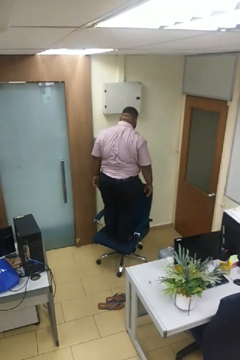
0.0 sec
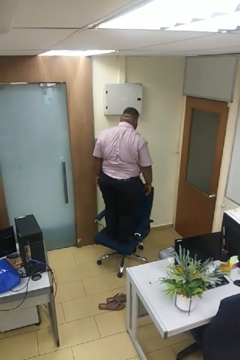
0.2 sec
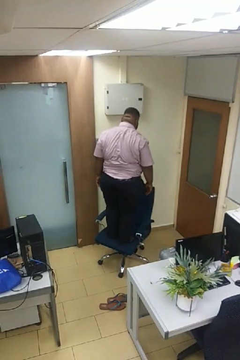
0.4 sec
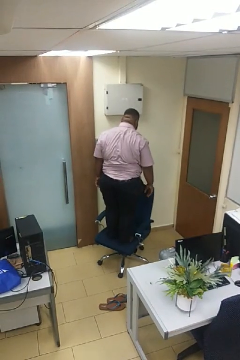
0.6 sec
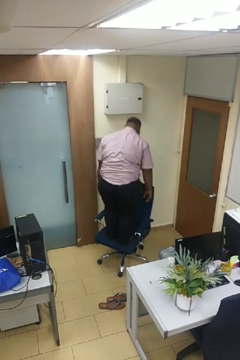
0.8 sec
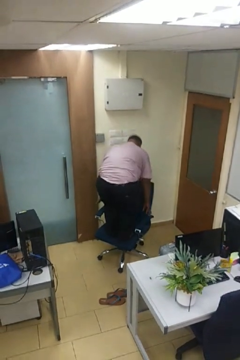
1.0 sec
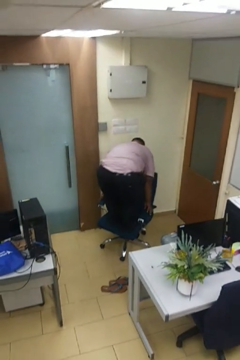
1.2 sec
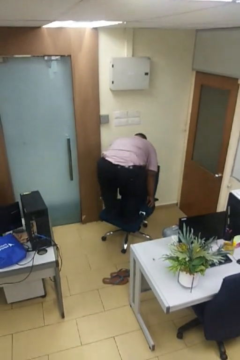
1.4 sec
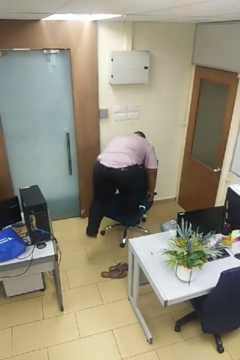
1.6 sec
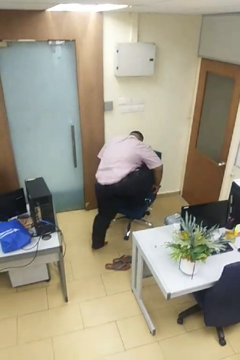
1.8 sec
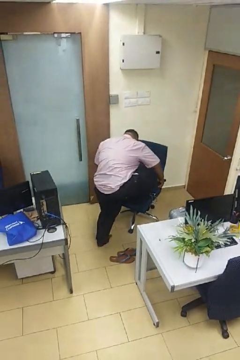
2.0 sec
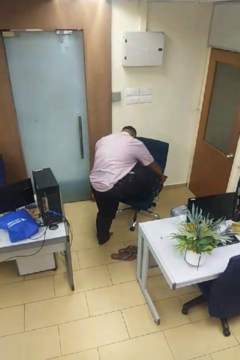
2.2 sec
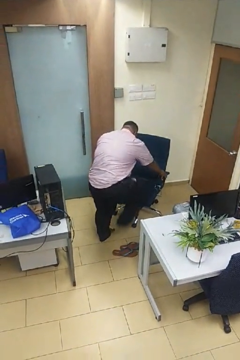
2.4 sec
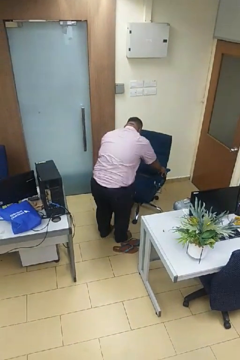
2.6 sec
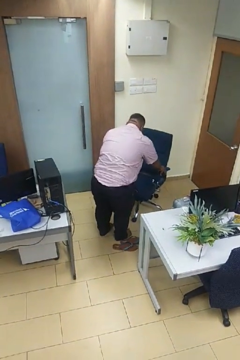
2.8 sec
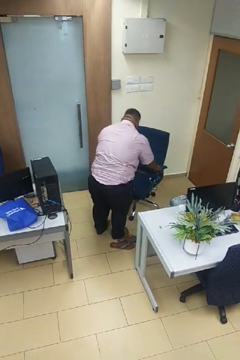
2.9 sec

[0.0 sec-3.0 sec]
person climbs off chair

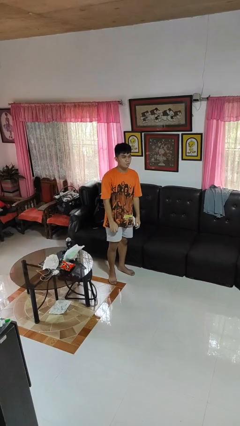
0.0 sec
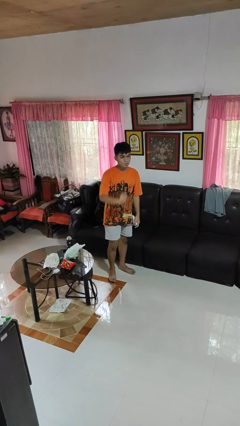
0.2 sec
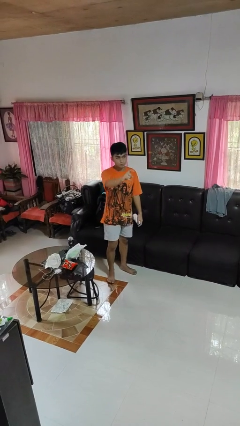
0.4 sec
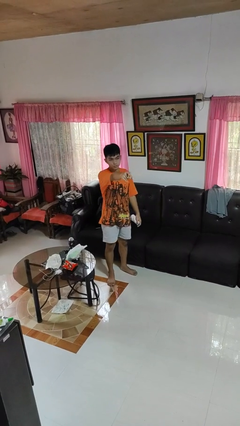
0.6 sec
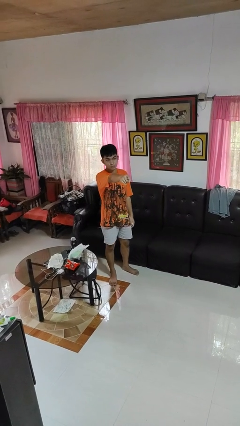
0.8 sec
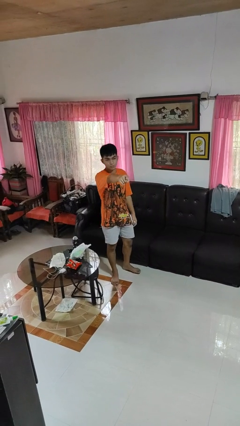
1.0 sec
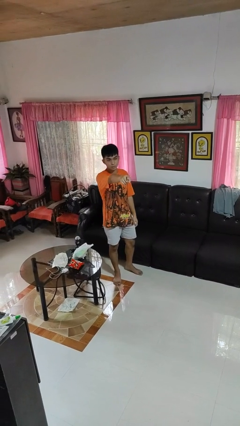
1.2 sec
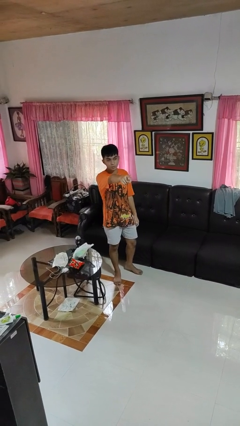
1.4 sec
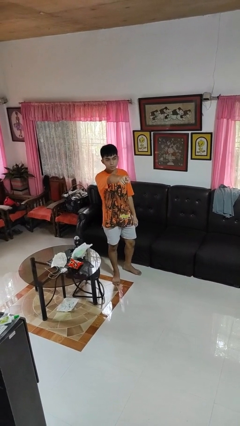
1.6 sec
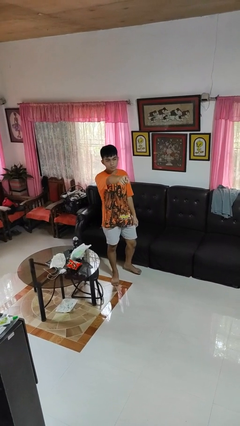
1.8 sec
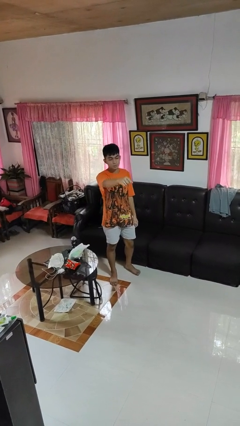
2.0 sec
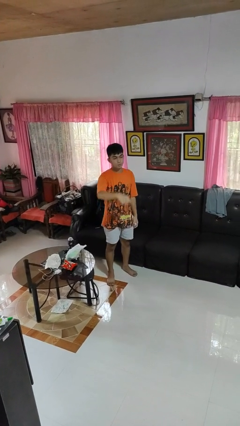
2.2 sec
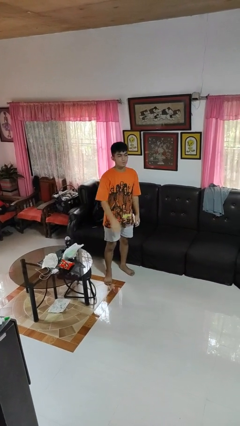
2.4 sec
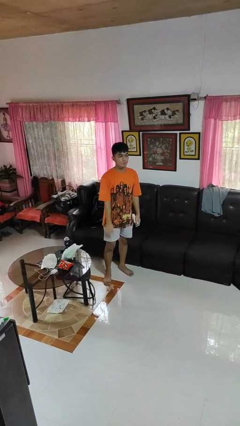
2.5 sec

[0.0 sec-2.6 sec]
person points at person

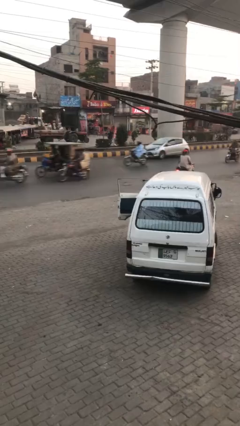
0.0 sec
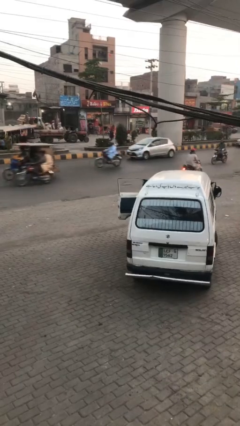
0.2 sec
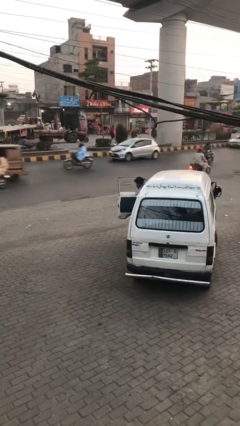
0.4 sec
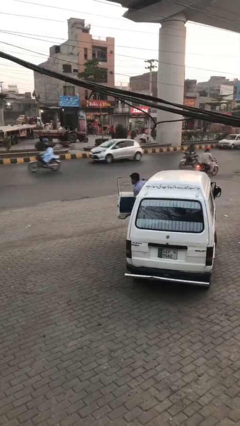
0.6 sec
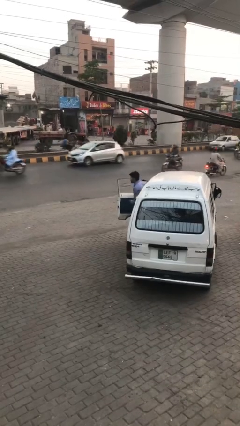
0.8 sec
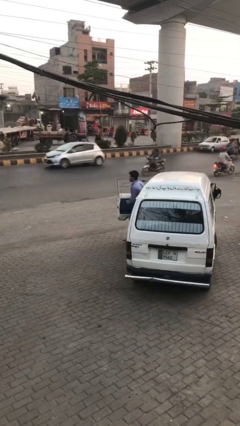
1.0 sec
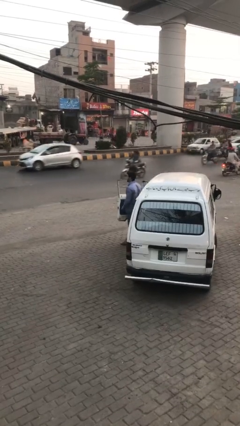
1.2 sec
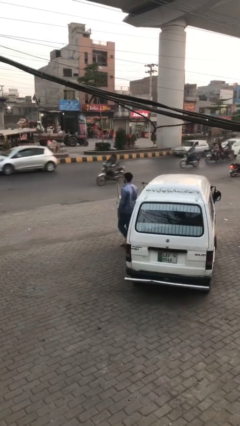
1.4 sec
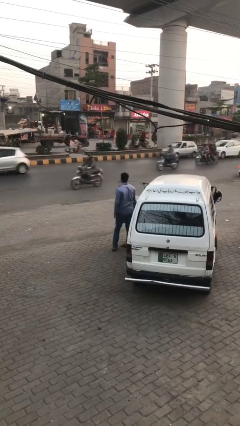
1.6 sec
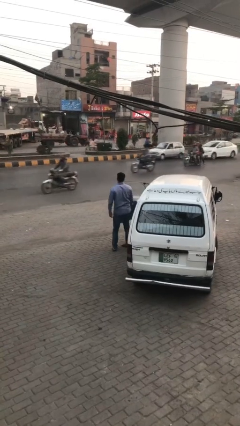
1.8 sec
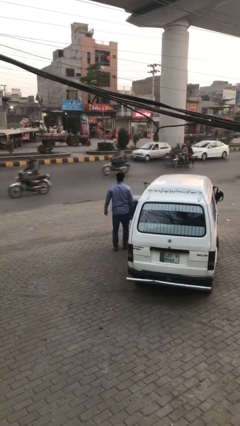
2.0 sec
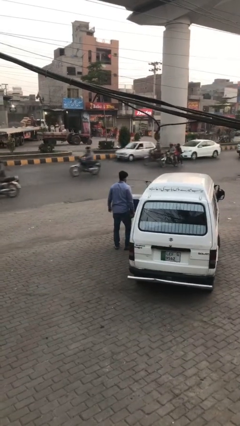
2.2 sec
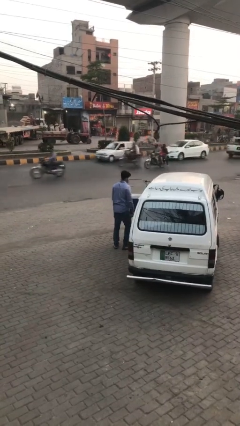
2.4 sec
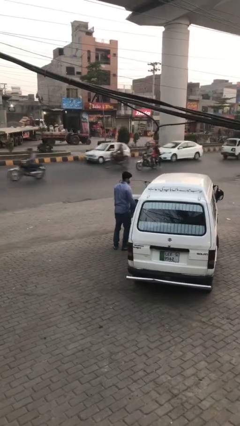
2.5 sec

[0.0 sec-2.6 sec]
person exits car

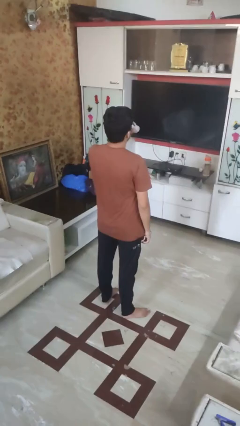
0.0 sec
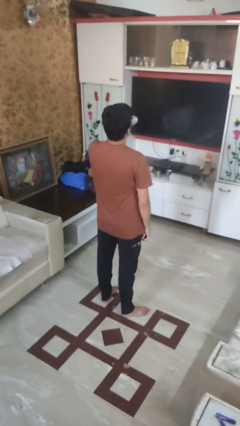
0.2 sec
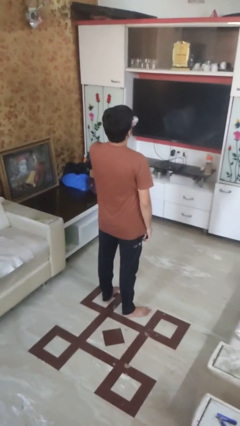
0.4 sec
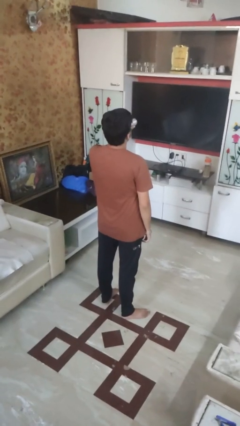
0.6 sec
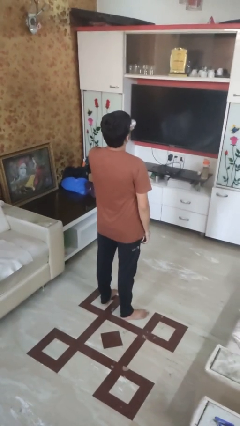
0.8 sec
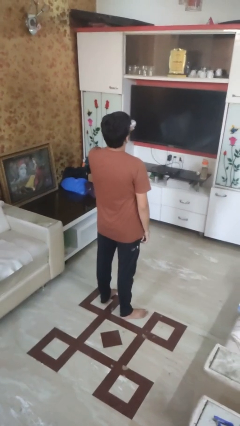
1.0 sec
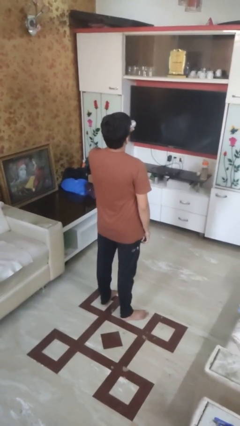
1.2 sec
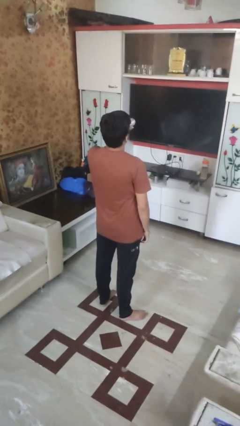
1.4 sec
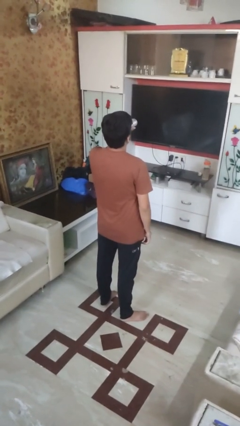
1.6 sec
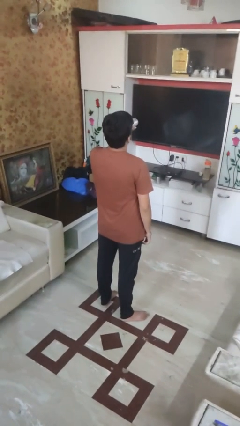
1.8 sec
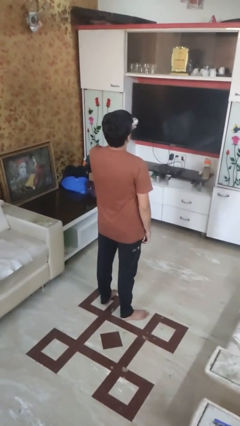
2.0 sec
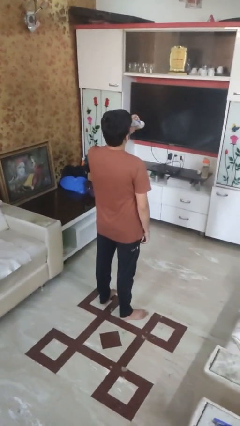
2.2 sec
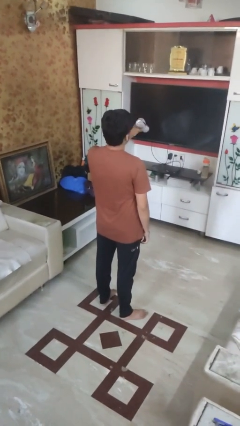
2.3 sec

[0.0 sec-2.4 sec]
person drinks from beverage can

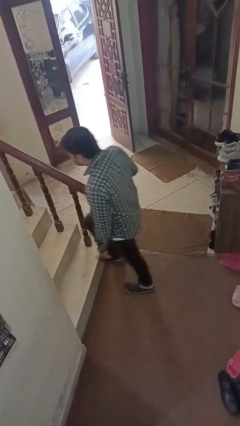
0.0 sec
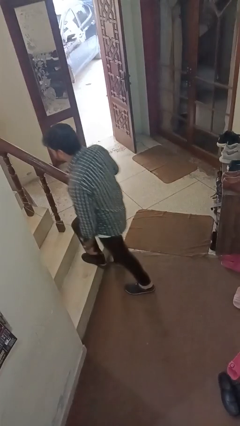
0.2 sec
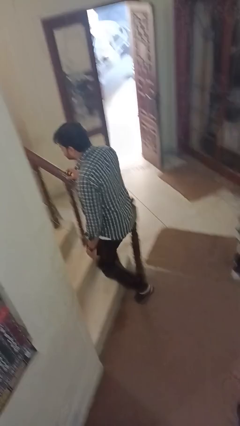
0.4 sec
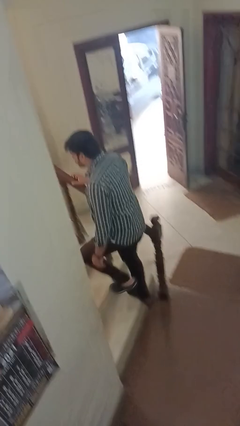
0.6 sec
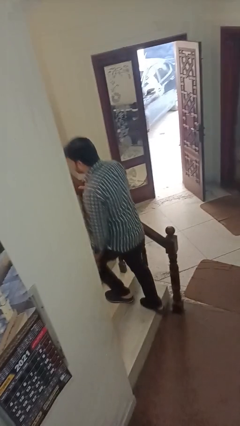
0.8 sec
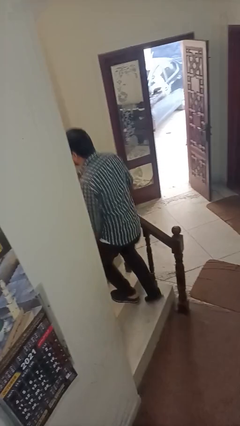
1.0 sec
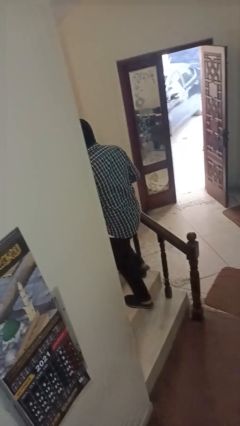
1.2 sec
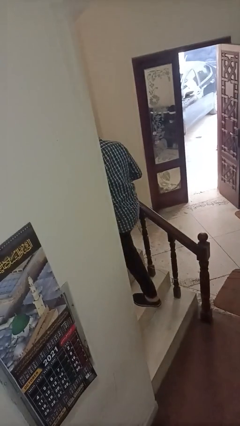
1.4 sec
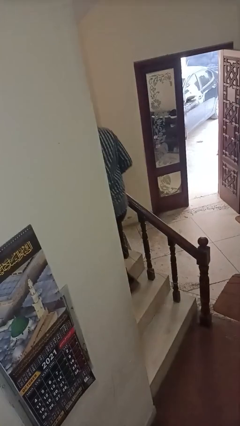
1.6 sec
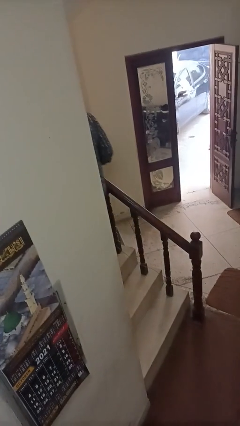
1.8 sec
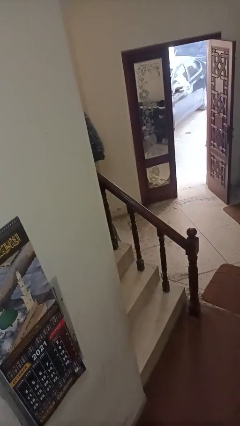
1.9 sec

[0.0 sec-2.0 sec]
person climbs up stairs

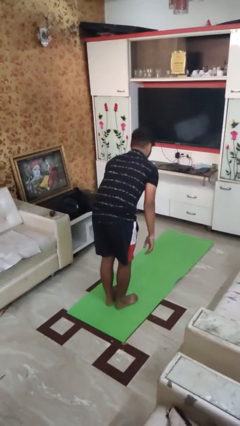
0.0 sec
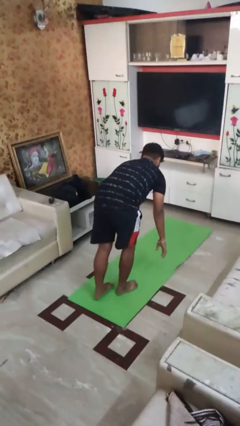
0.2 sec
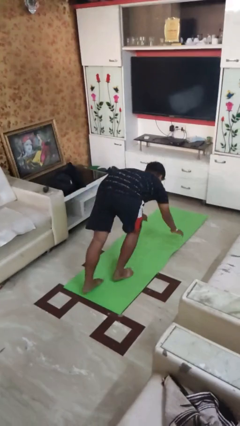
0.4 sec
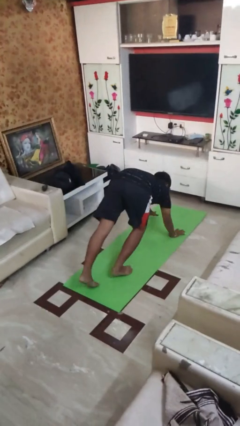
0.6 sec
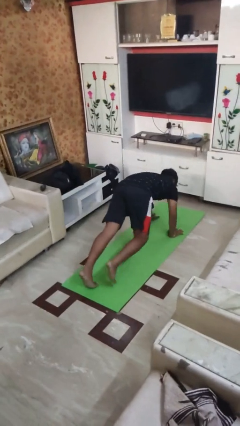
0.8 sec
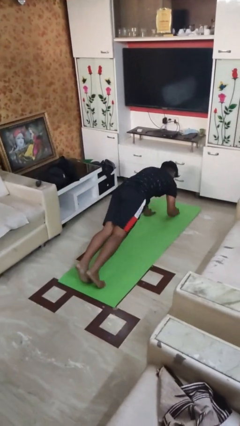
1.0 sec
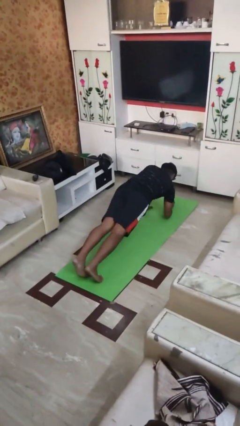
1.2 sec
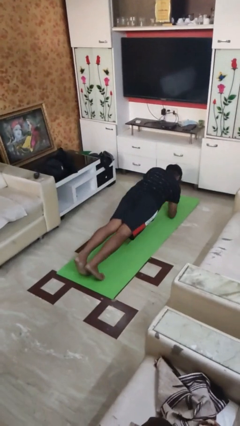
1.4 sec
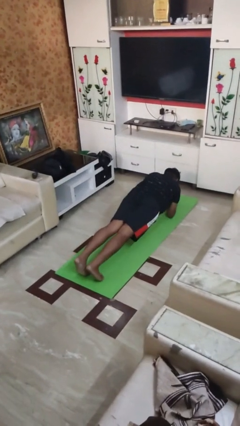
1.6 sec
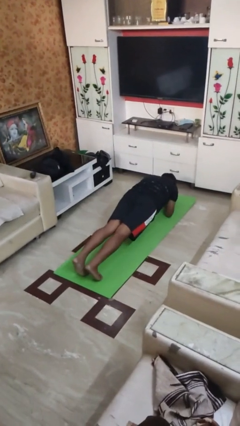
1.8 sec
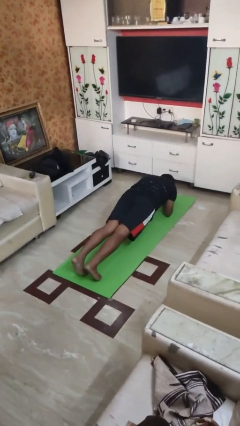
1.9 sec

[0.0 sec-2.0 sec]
person exercises with plank

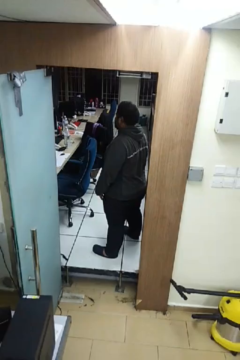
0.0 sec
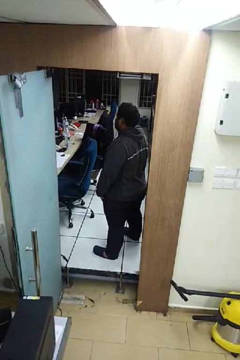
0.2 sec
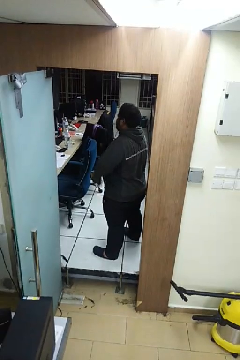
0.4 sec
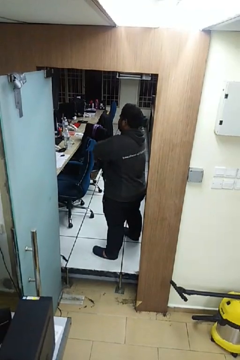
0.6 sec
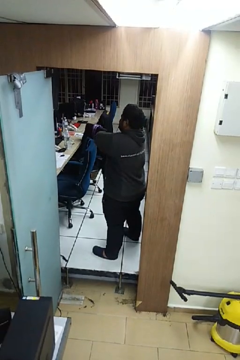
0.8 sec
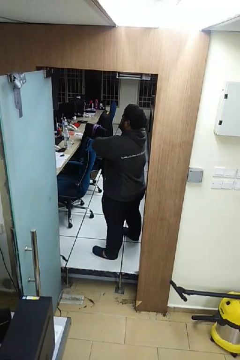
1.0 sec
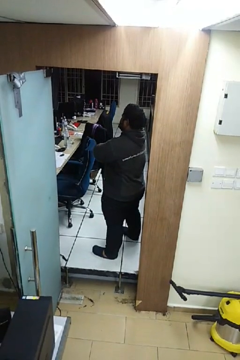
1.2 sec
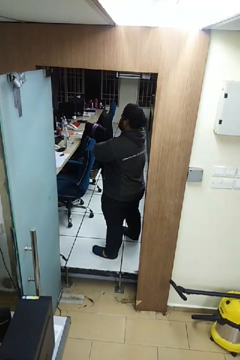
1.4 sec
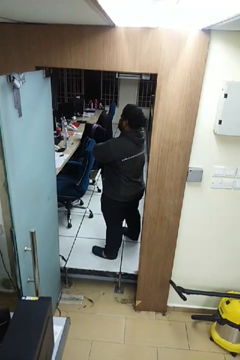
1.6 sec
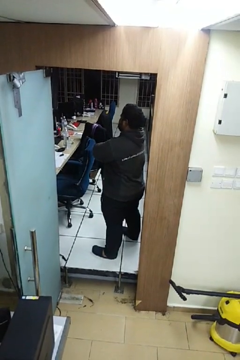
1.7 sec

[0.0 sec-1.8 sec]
person crosses arms

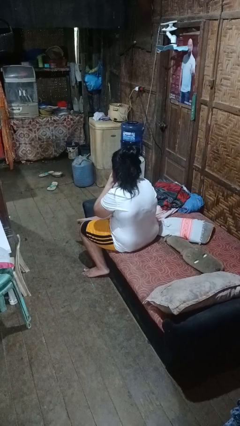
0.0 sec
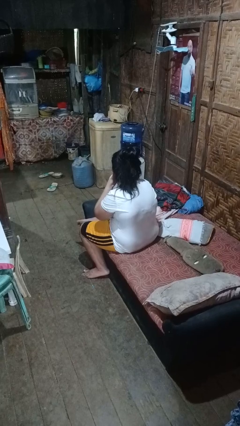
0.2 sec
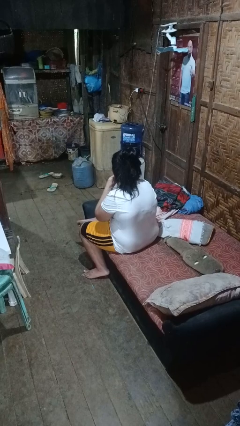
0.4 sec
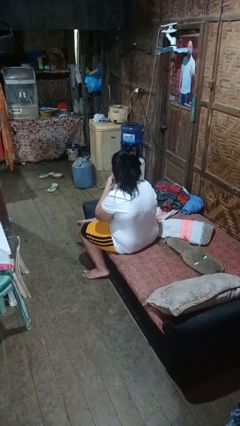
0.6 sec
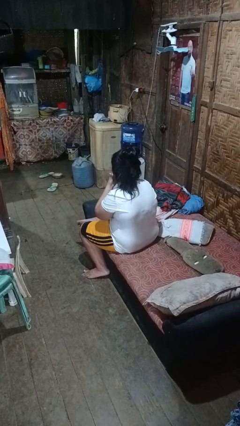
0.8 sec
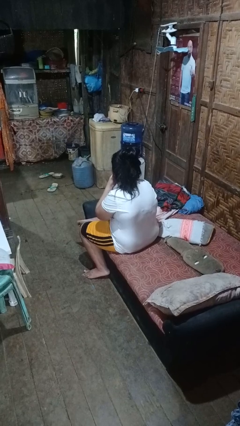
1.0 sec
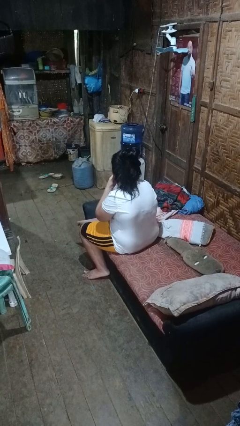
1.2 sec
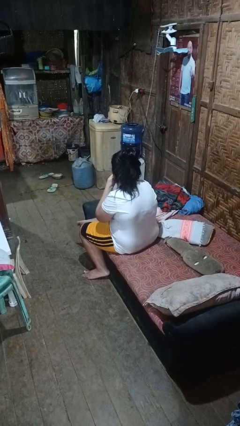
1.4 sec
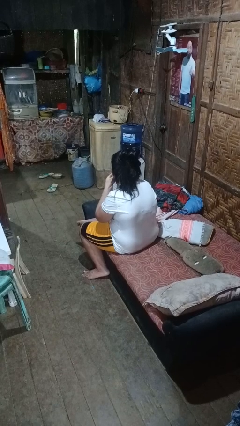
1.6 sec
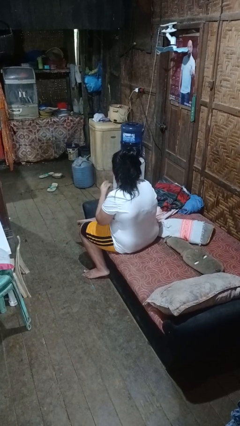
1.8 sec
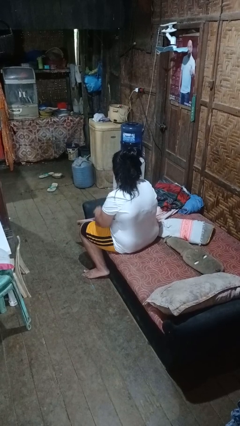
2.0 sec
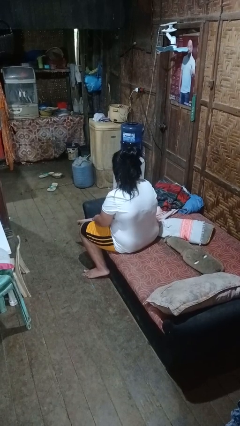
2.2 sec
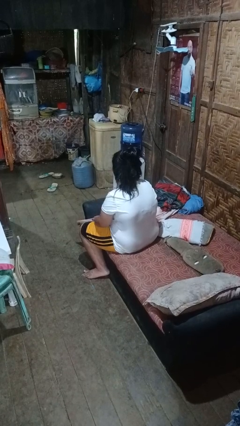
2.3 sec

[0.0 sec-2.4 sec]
person strokes chin
